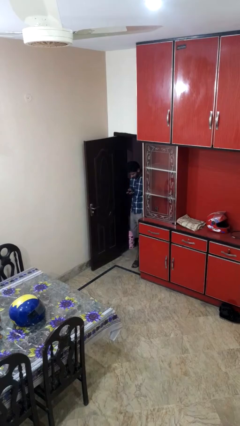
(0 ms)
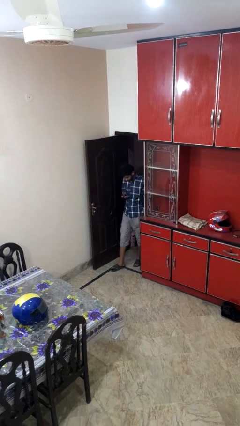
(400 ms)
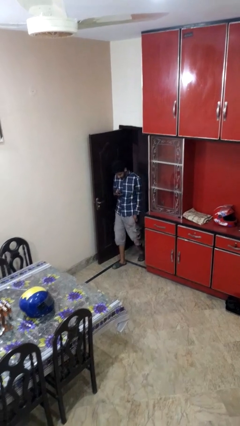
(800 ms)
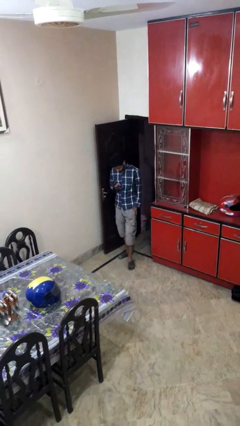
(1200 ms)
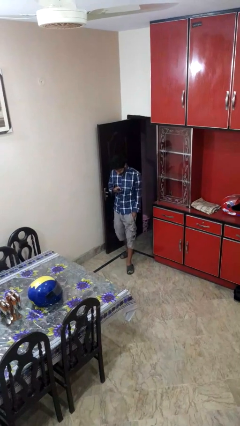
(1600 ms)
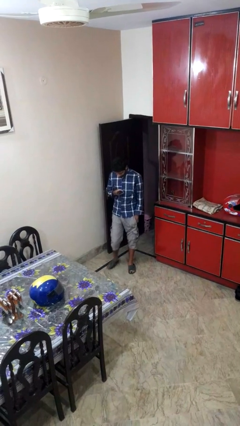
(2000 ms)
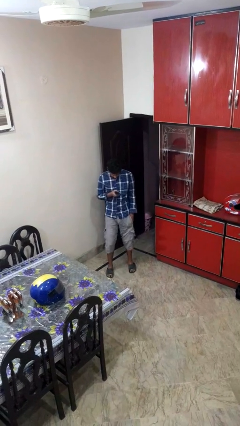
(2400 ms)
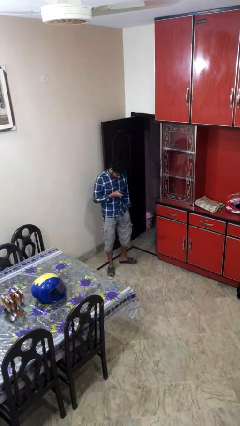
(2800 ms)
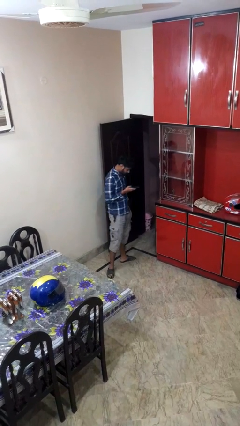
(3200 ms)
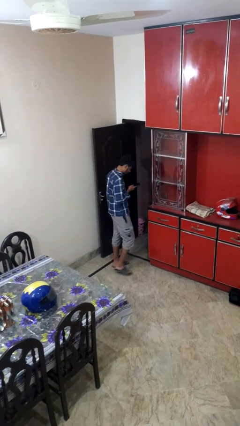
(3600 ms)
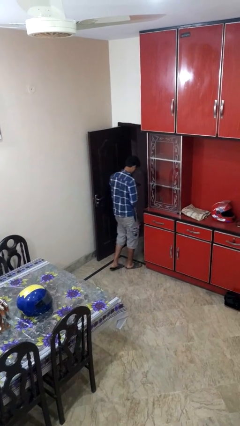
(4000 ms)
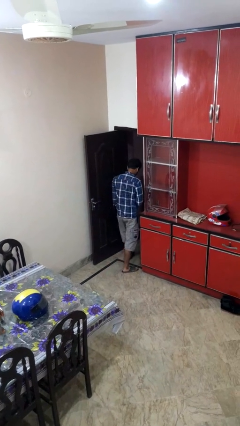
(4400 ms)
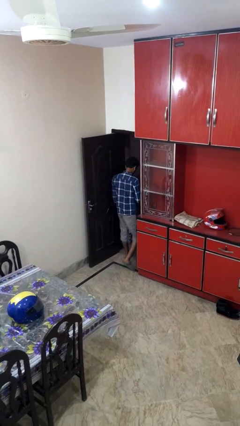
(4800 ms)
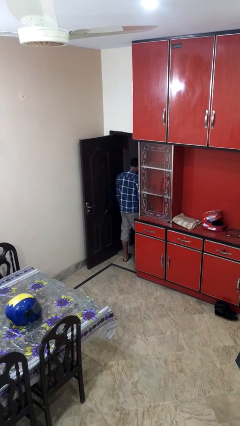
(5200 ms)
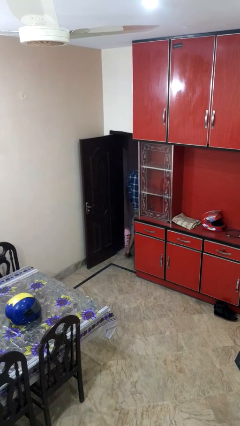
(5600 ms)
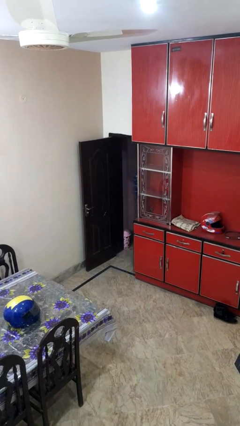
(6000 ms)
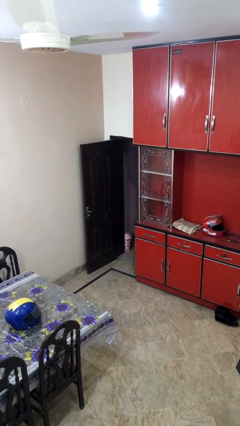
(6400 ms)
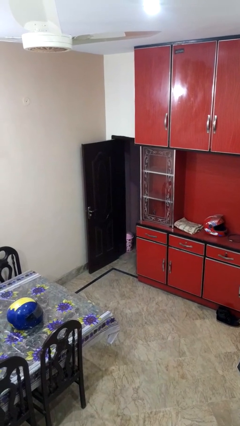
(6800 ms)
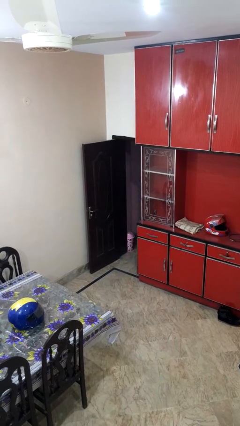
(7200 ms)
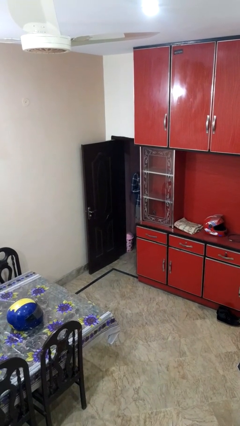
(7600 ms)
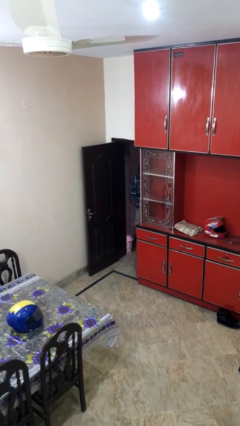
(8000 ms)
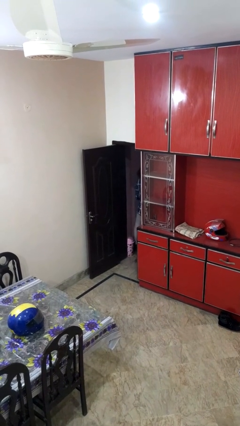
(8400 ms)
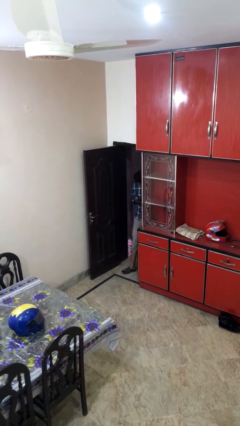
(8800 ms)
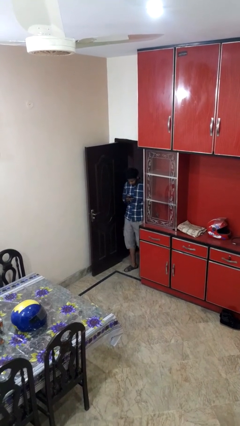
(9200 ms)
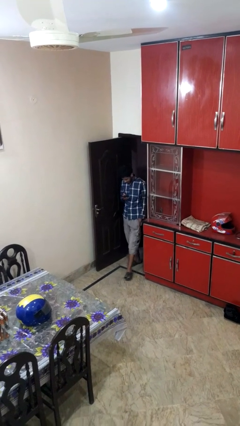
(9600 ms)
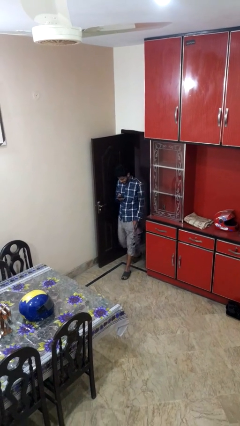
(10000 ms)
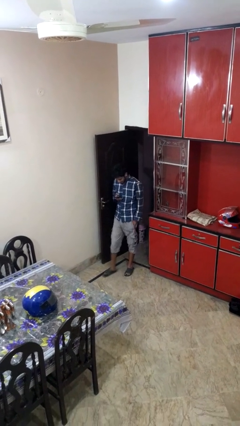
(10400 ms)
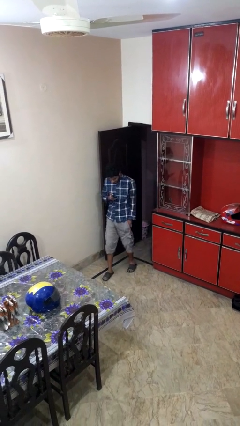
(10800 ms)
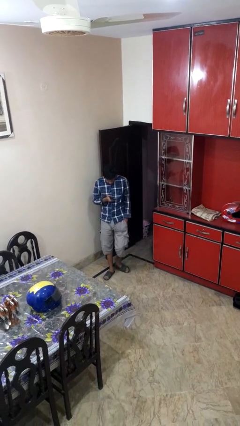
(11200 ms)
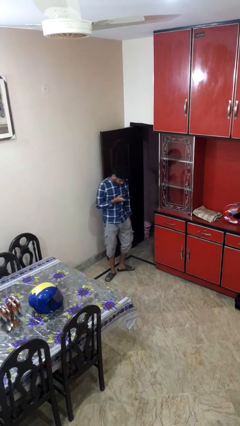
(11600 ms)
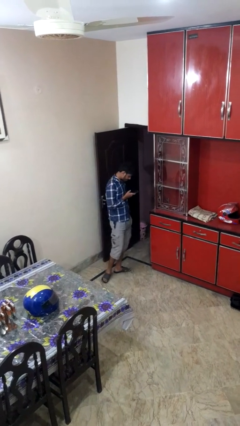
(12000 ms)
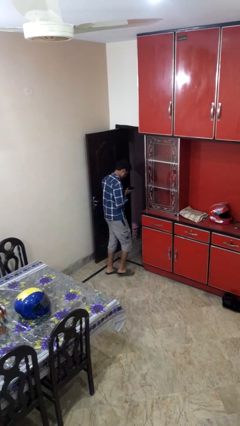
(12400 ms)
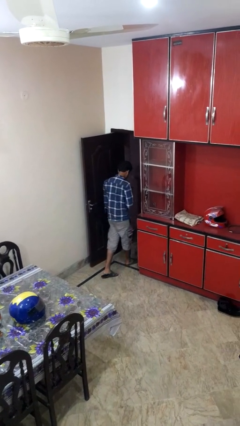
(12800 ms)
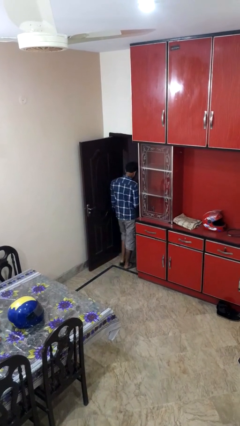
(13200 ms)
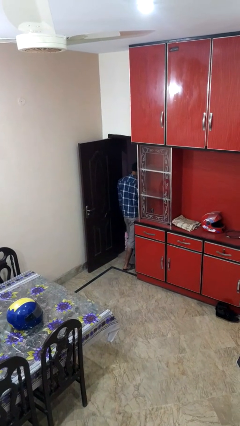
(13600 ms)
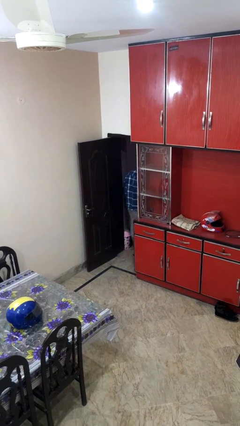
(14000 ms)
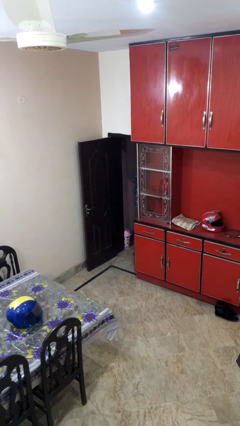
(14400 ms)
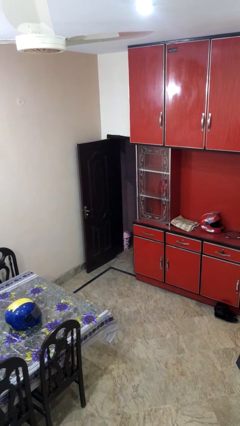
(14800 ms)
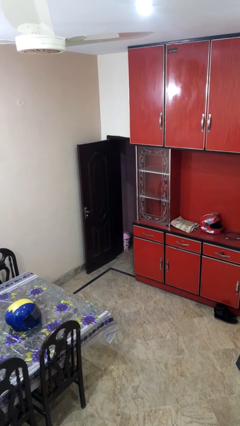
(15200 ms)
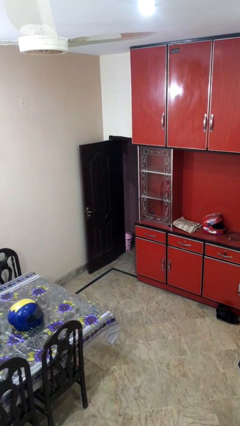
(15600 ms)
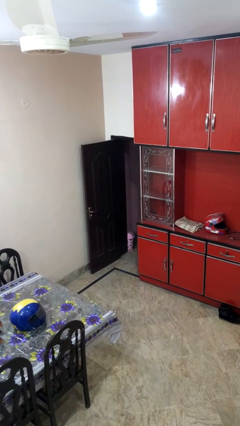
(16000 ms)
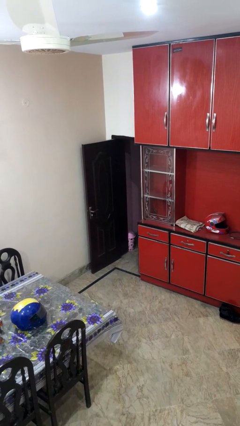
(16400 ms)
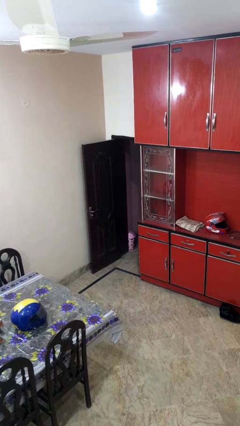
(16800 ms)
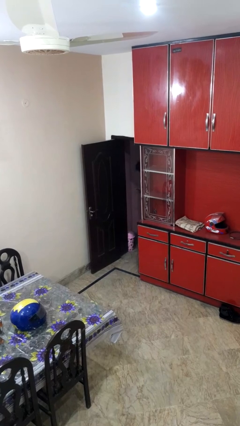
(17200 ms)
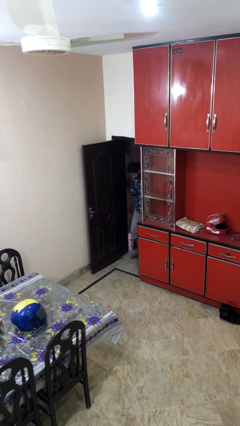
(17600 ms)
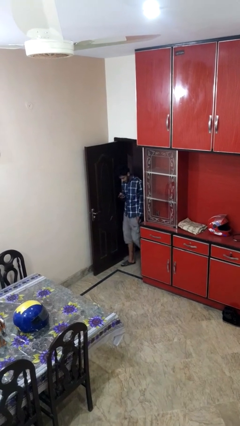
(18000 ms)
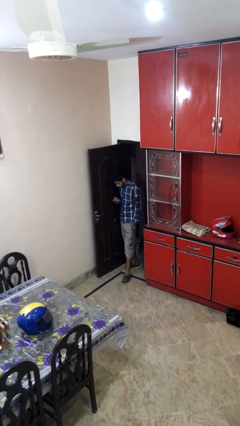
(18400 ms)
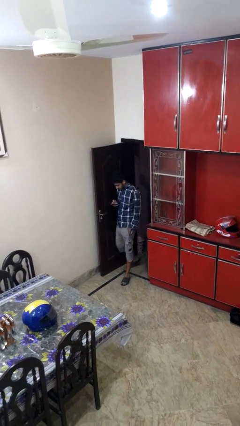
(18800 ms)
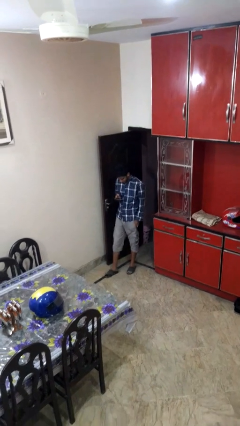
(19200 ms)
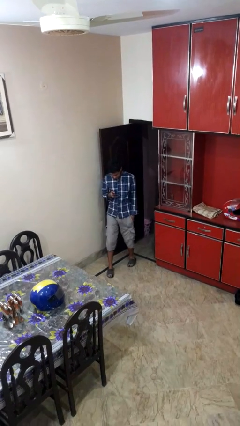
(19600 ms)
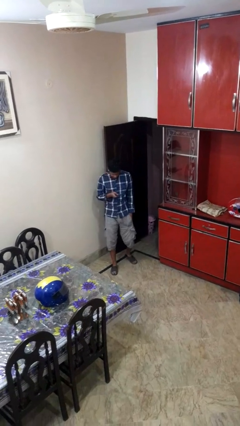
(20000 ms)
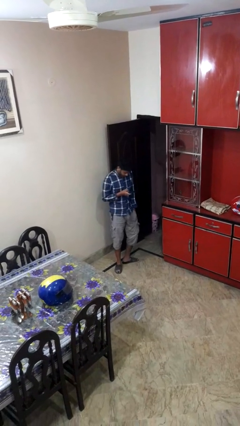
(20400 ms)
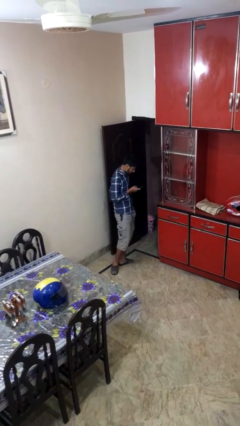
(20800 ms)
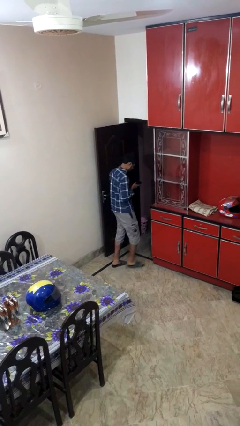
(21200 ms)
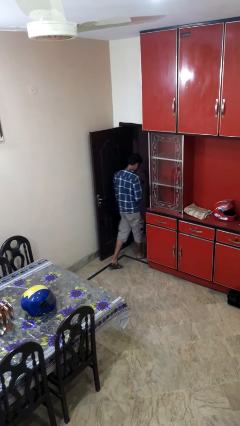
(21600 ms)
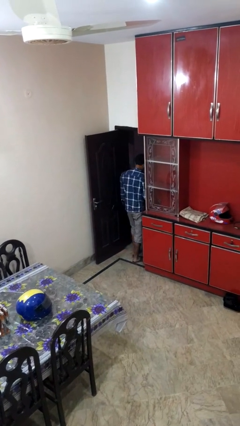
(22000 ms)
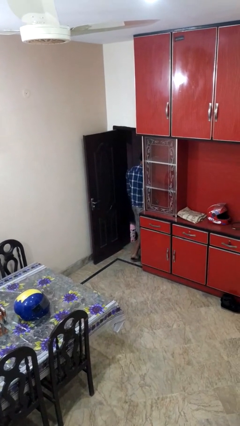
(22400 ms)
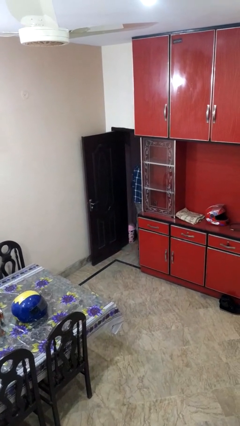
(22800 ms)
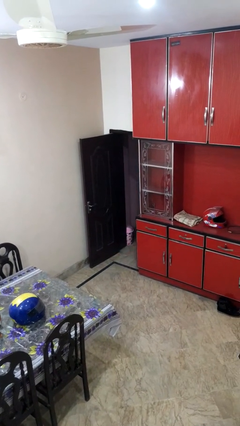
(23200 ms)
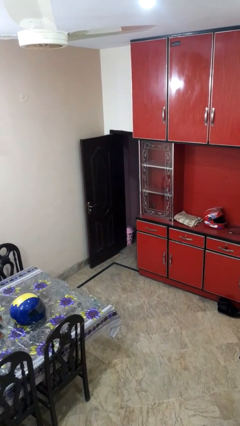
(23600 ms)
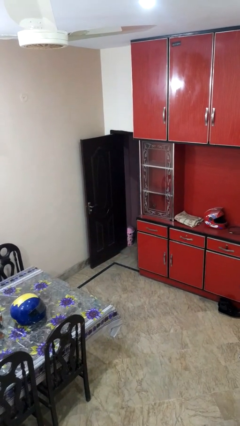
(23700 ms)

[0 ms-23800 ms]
person texts on phone

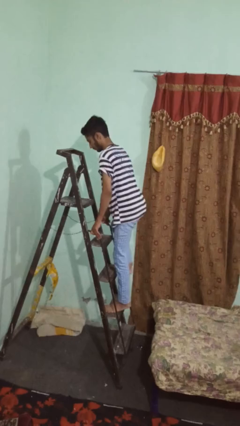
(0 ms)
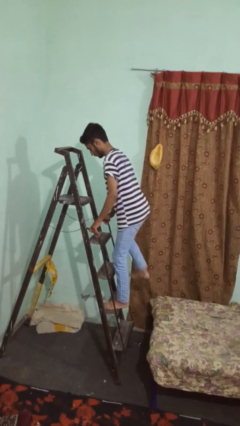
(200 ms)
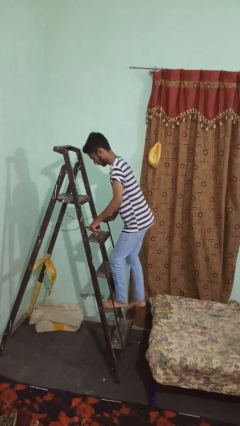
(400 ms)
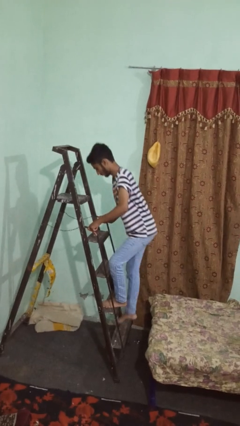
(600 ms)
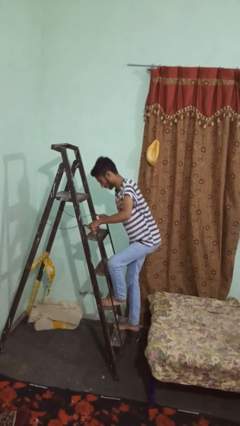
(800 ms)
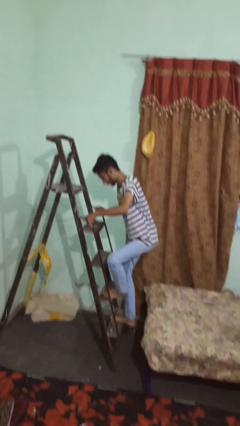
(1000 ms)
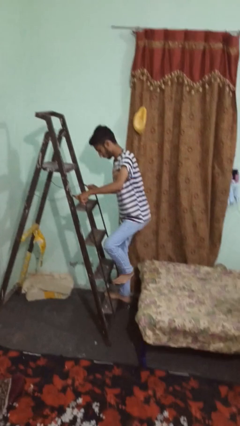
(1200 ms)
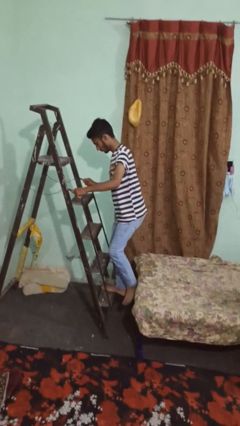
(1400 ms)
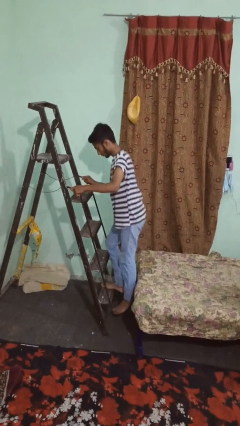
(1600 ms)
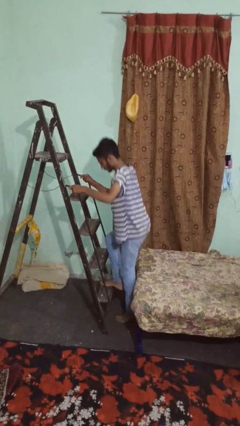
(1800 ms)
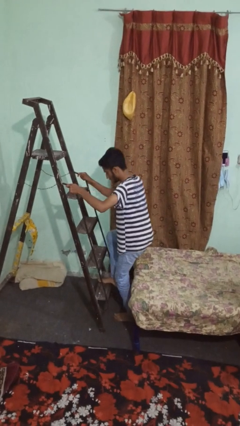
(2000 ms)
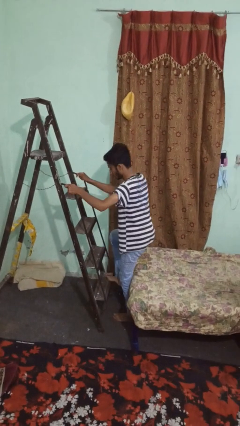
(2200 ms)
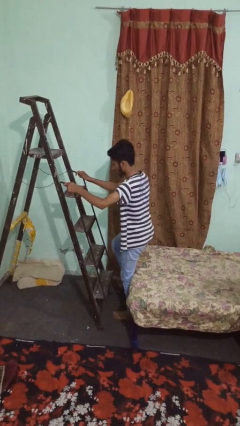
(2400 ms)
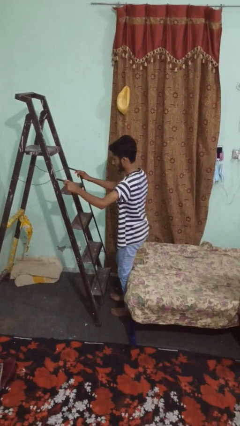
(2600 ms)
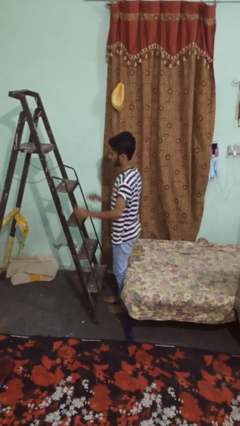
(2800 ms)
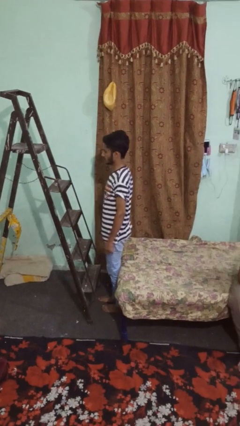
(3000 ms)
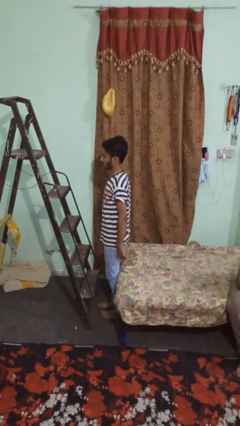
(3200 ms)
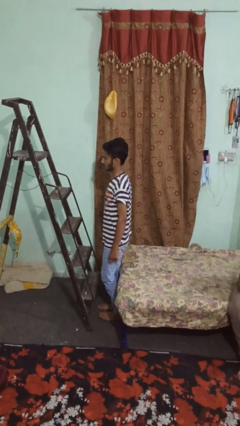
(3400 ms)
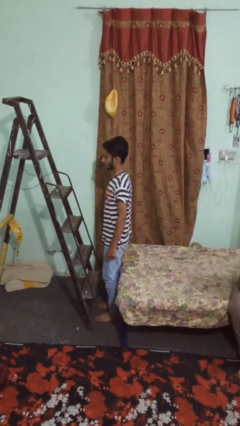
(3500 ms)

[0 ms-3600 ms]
person climbs down ladder

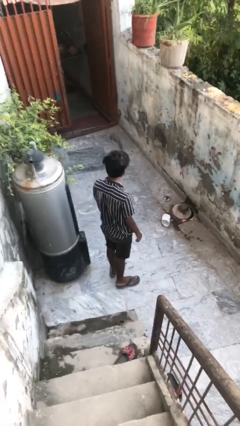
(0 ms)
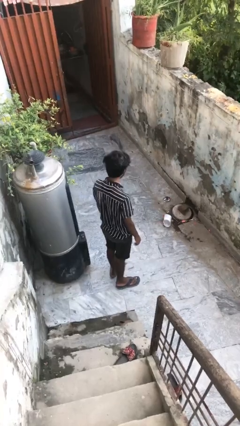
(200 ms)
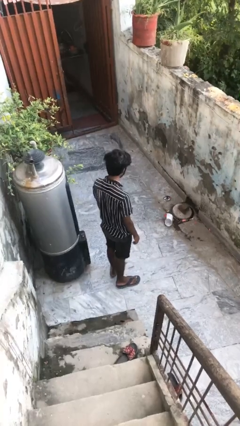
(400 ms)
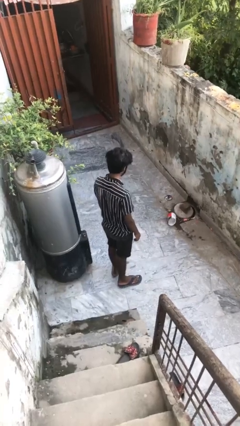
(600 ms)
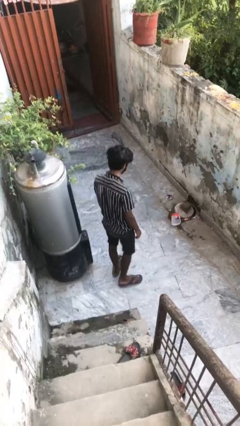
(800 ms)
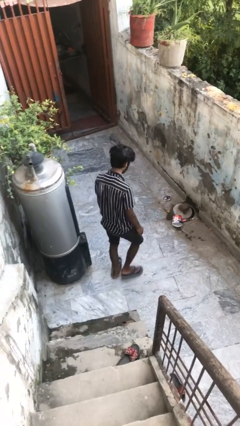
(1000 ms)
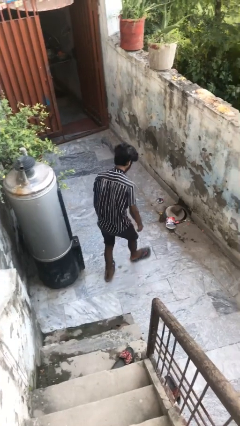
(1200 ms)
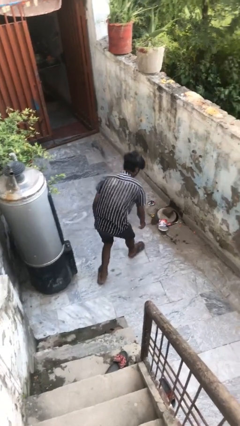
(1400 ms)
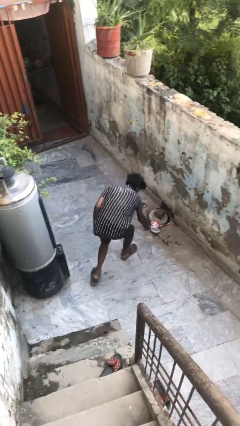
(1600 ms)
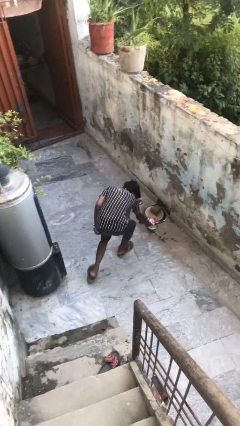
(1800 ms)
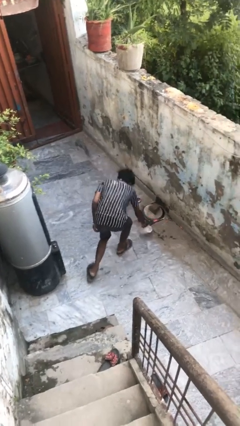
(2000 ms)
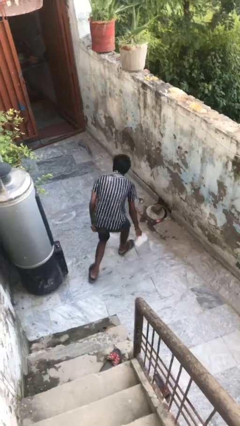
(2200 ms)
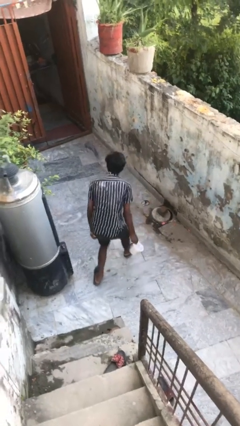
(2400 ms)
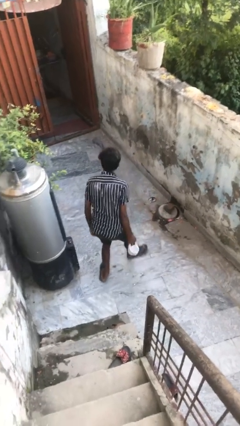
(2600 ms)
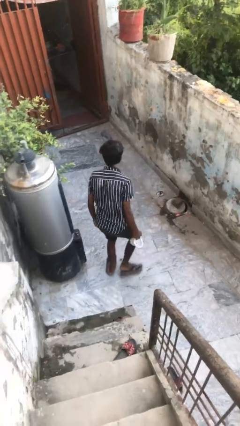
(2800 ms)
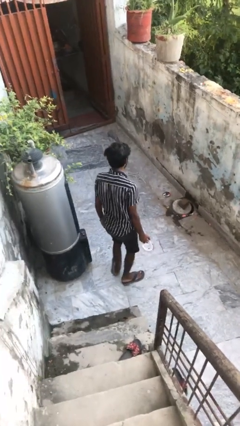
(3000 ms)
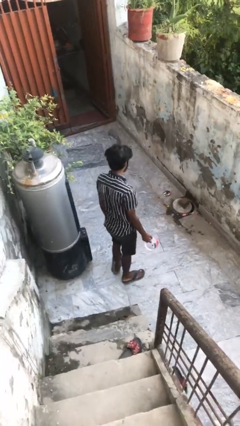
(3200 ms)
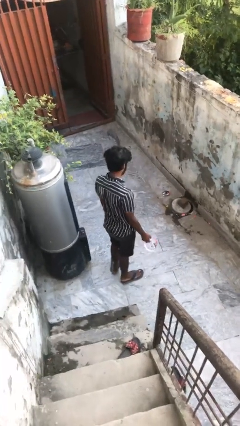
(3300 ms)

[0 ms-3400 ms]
person picks up object from floor
